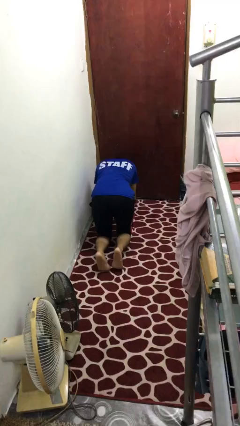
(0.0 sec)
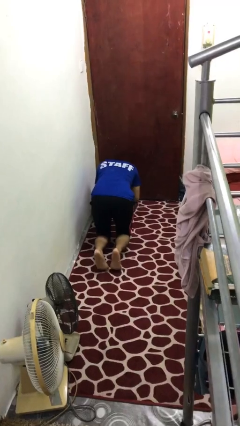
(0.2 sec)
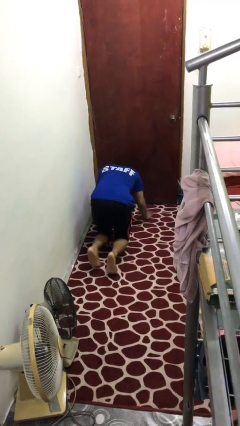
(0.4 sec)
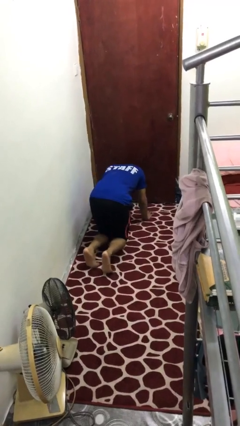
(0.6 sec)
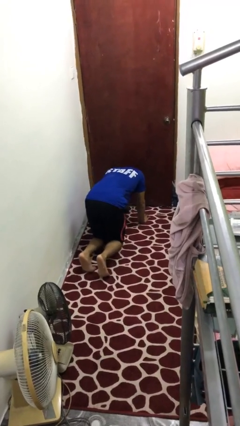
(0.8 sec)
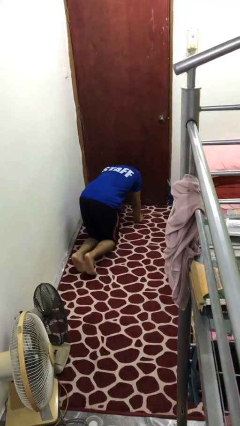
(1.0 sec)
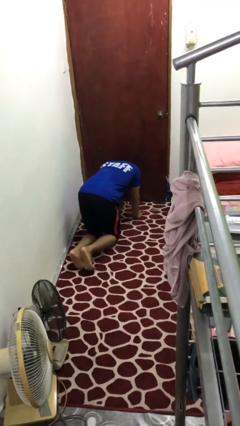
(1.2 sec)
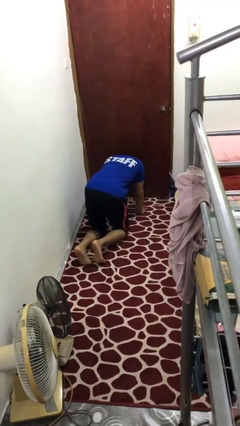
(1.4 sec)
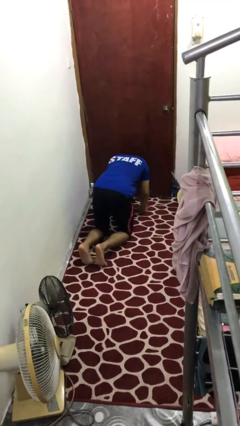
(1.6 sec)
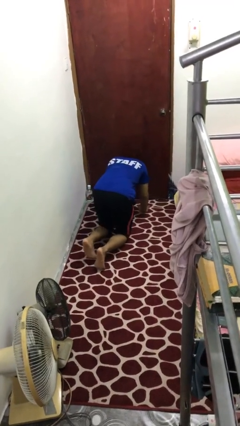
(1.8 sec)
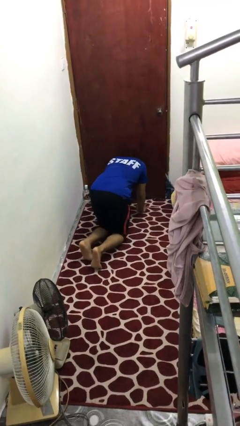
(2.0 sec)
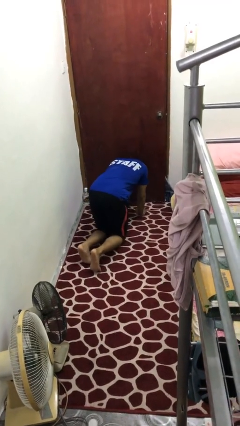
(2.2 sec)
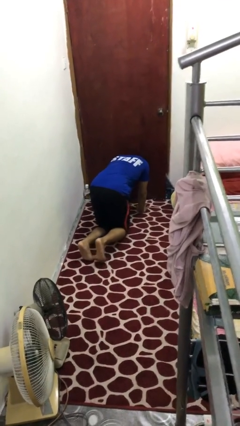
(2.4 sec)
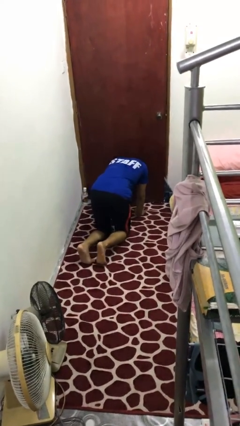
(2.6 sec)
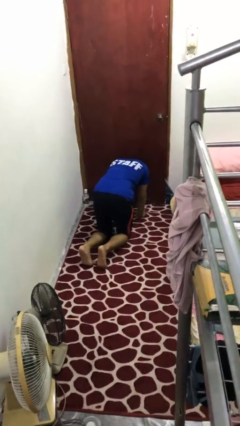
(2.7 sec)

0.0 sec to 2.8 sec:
person crawls

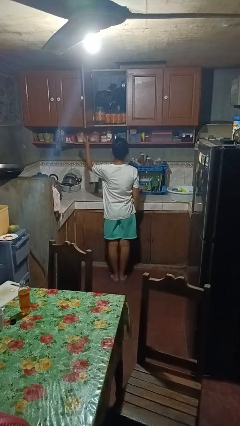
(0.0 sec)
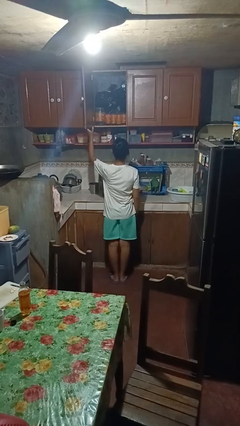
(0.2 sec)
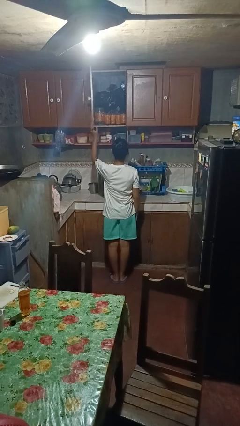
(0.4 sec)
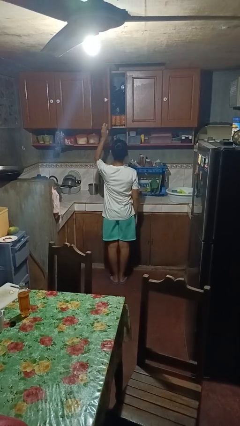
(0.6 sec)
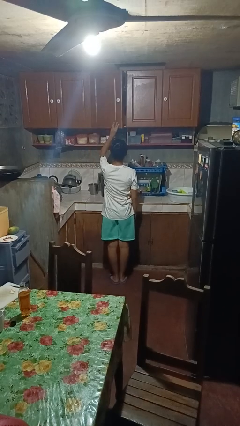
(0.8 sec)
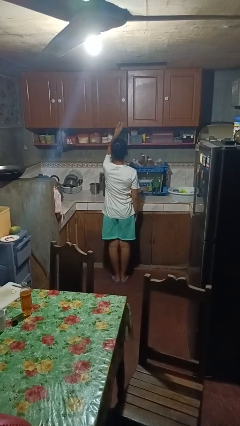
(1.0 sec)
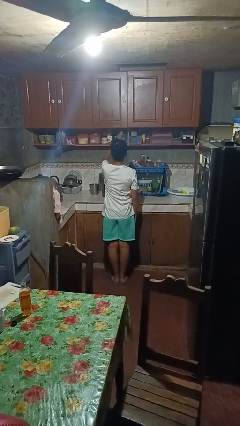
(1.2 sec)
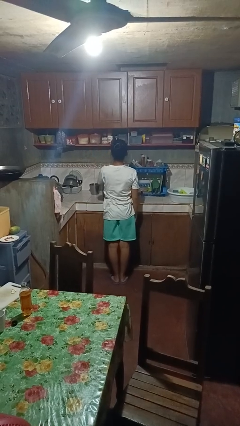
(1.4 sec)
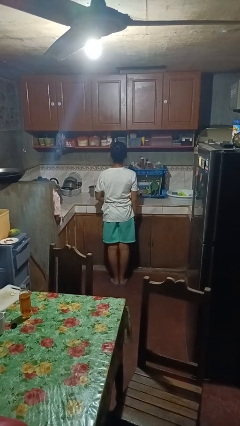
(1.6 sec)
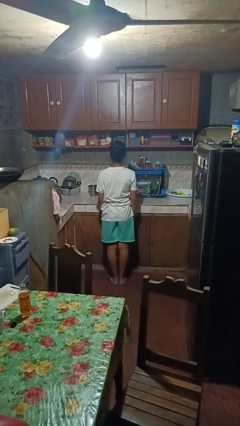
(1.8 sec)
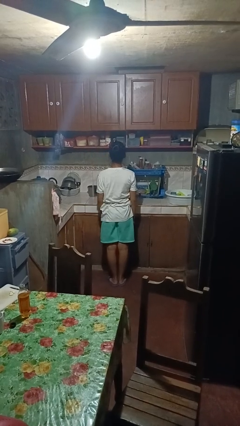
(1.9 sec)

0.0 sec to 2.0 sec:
person closes cabinet

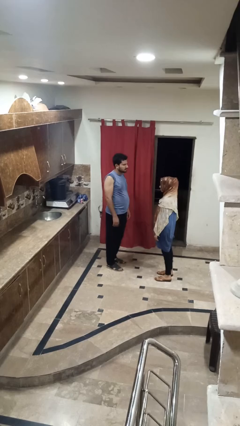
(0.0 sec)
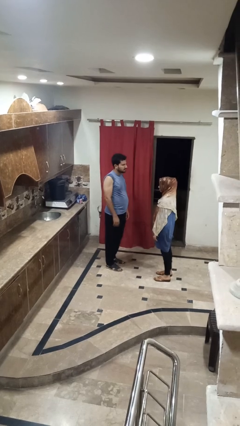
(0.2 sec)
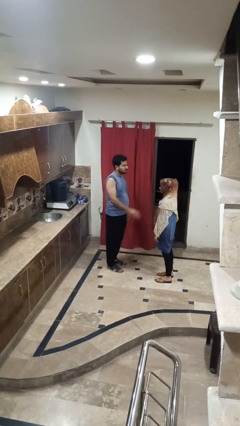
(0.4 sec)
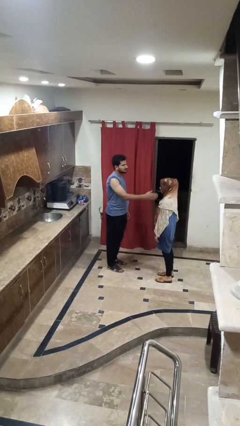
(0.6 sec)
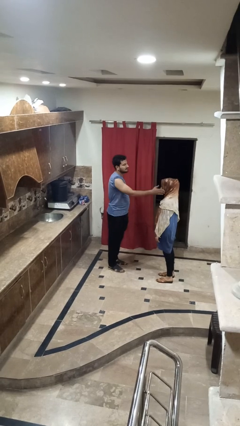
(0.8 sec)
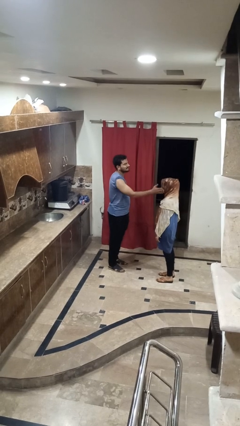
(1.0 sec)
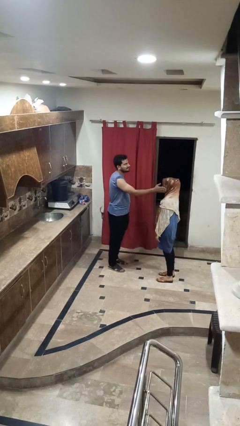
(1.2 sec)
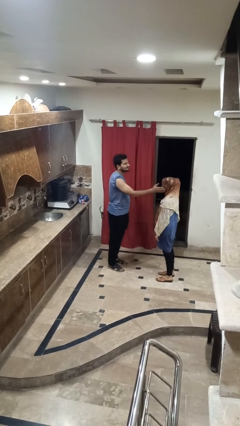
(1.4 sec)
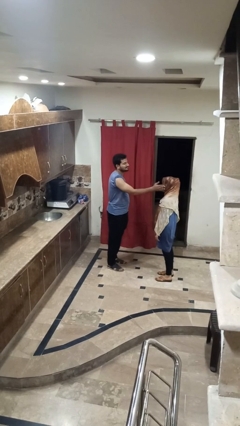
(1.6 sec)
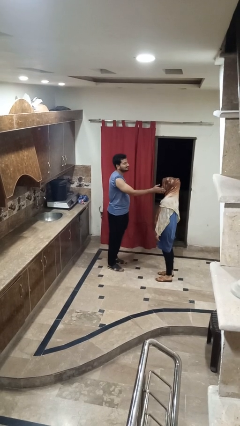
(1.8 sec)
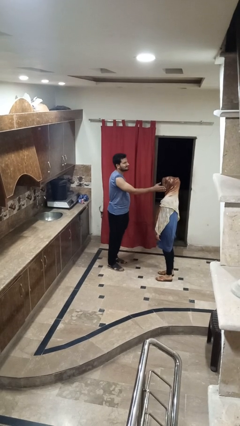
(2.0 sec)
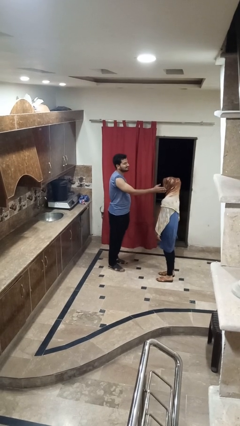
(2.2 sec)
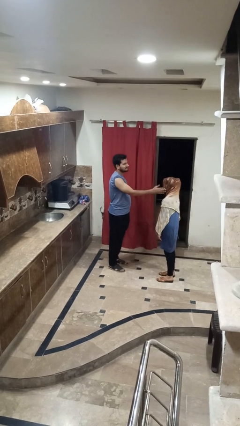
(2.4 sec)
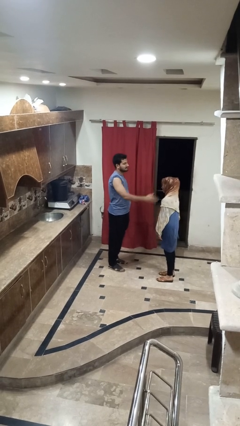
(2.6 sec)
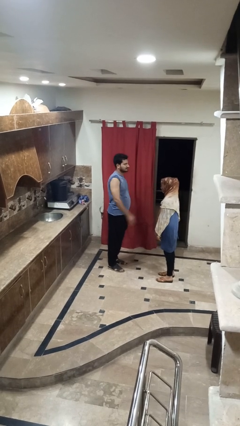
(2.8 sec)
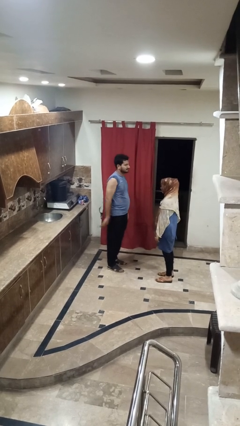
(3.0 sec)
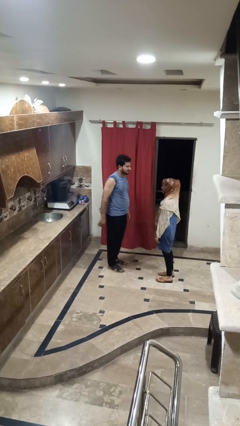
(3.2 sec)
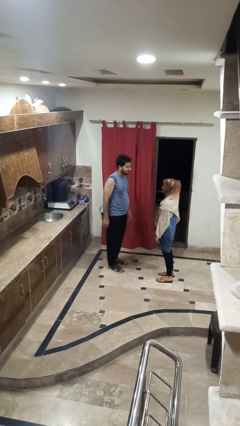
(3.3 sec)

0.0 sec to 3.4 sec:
person touches face of person

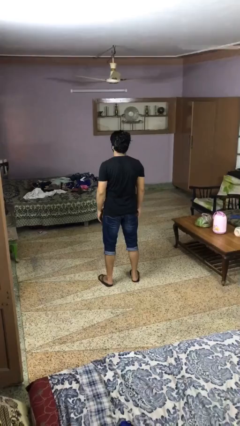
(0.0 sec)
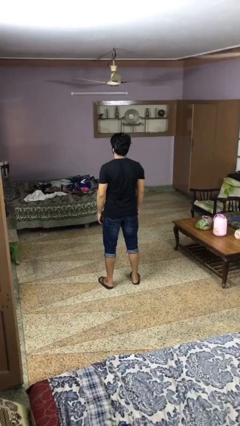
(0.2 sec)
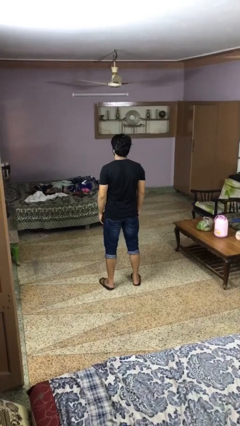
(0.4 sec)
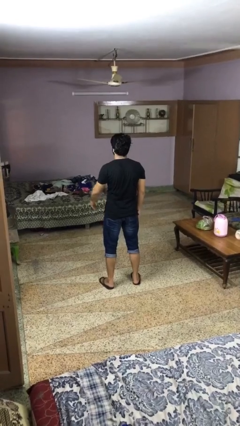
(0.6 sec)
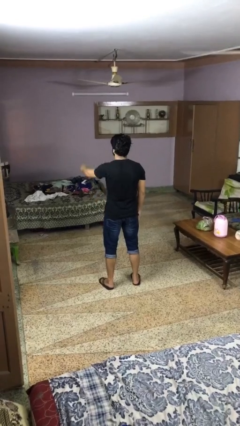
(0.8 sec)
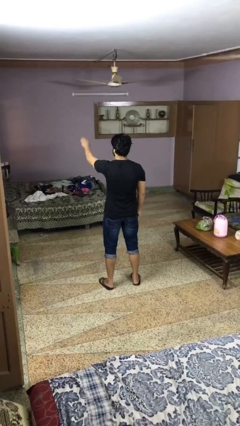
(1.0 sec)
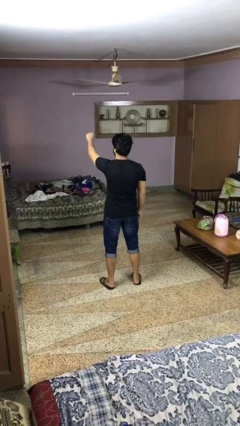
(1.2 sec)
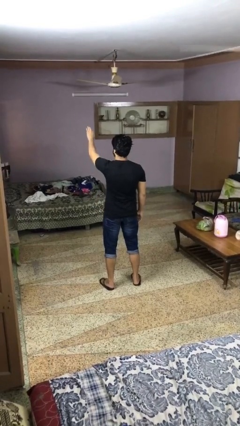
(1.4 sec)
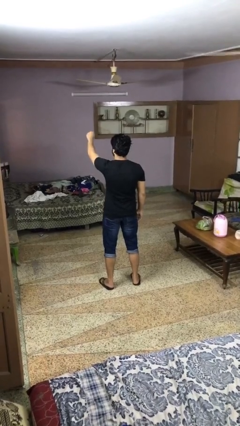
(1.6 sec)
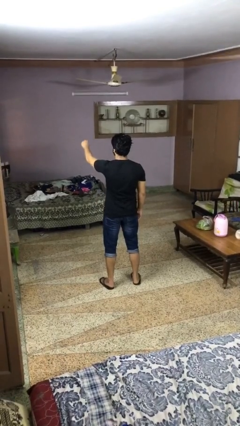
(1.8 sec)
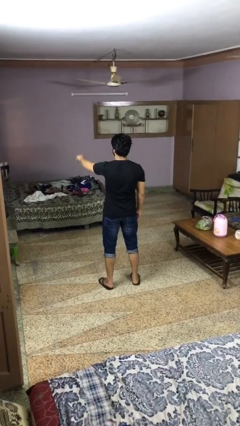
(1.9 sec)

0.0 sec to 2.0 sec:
person gestures come here

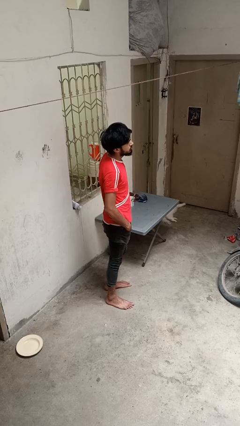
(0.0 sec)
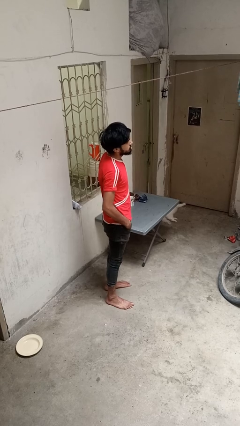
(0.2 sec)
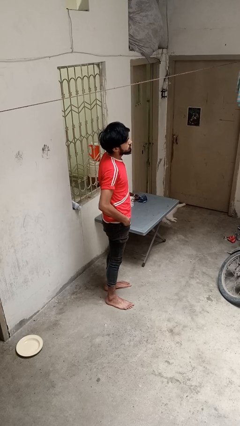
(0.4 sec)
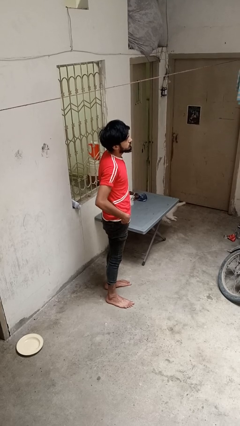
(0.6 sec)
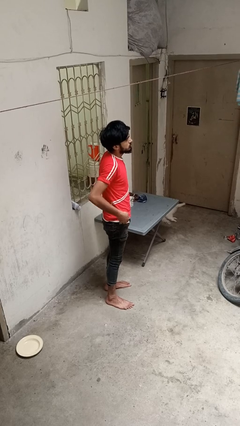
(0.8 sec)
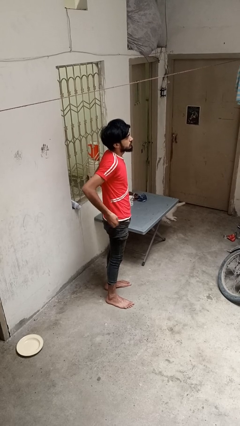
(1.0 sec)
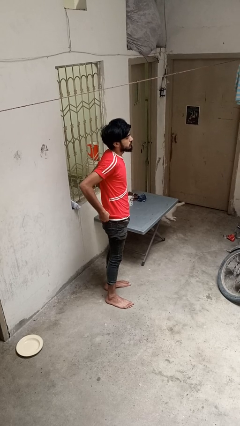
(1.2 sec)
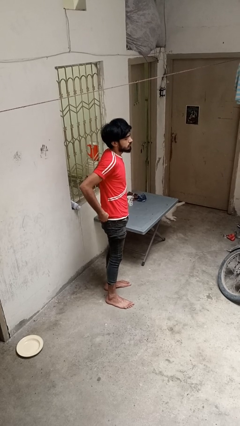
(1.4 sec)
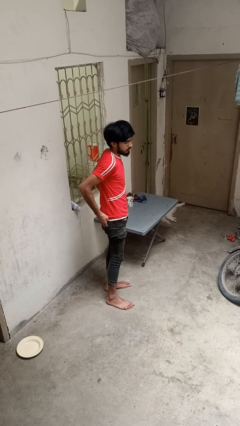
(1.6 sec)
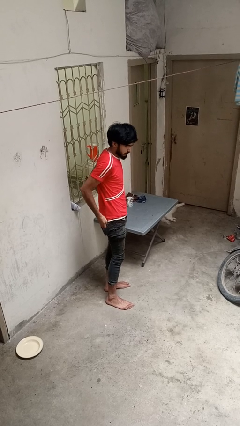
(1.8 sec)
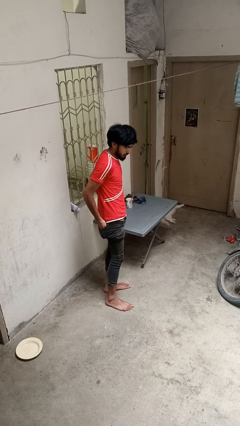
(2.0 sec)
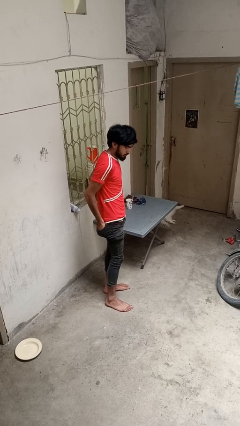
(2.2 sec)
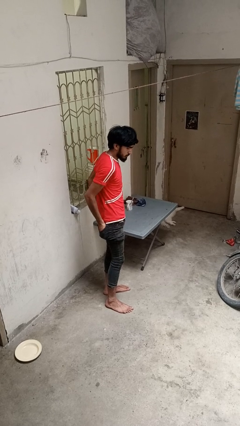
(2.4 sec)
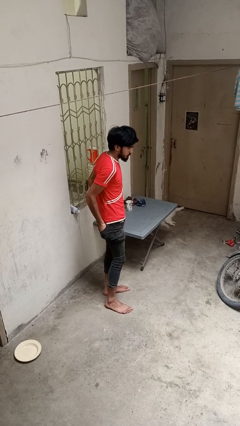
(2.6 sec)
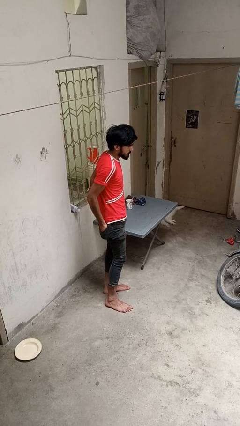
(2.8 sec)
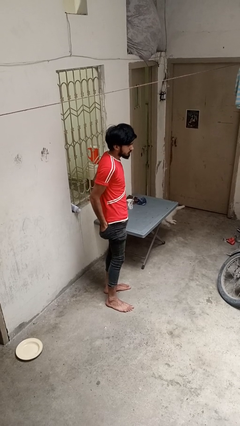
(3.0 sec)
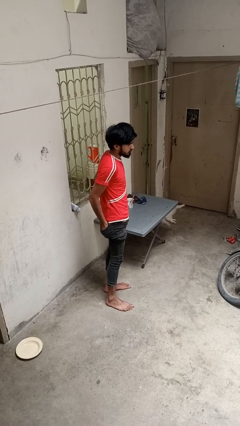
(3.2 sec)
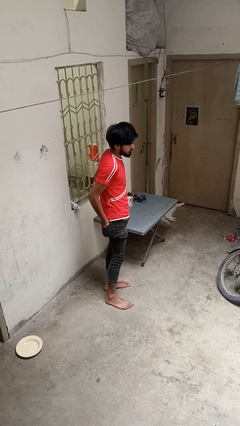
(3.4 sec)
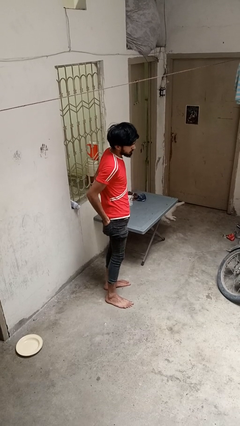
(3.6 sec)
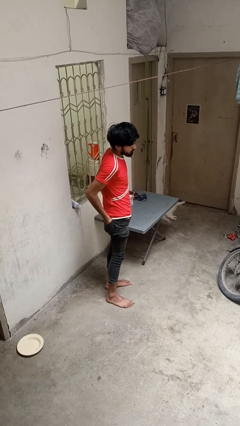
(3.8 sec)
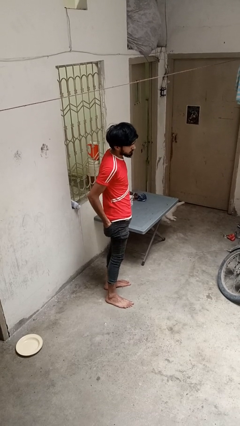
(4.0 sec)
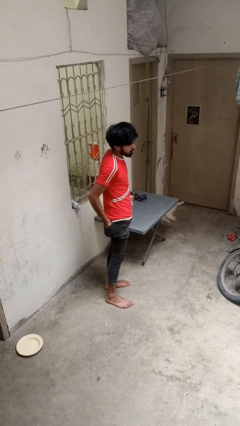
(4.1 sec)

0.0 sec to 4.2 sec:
person puts hands in back pockets

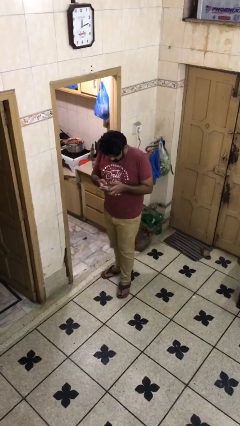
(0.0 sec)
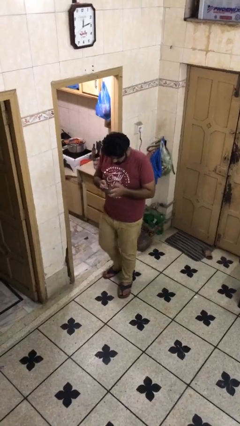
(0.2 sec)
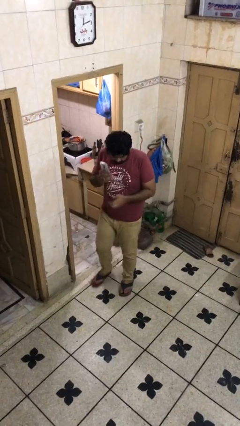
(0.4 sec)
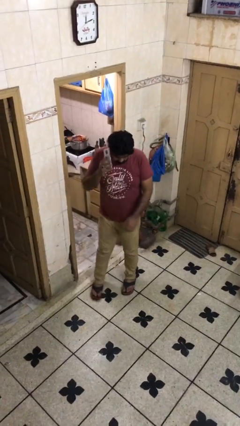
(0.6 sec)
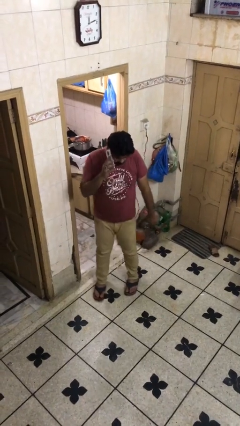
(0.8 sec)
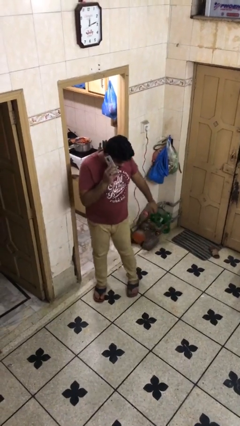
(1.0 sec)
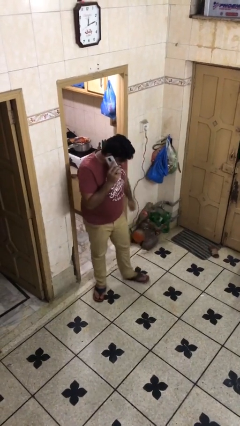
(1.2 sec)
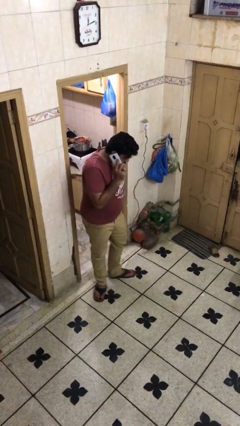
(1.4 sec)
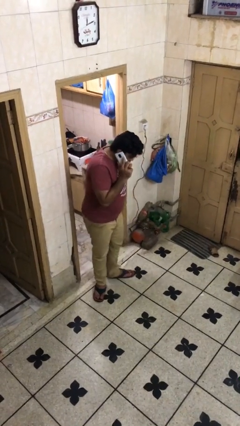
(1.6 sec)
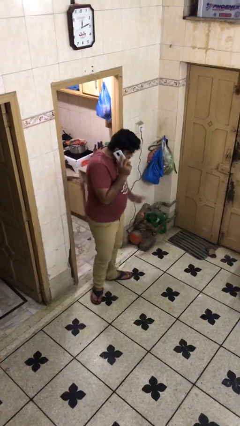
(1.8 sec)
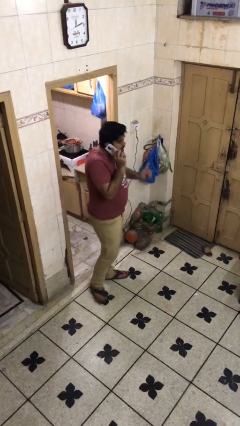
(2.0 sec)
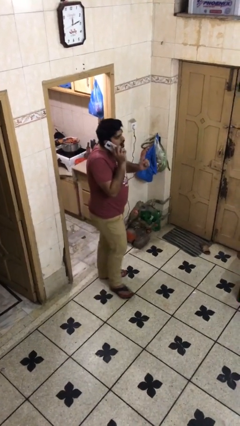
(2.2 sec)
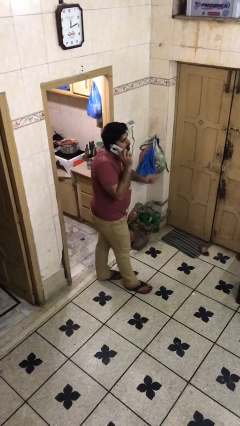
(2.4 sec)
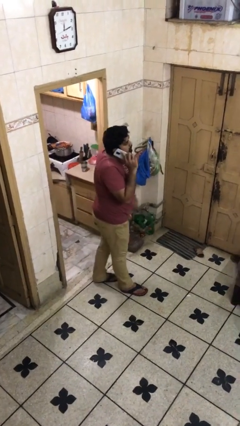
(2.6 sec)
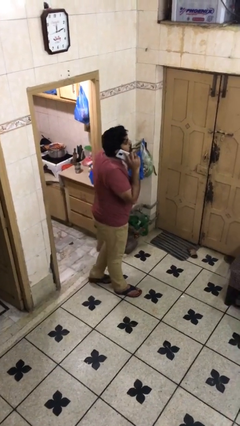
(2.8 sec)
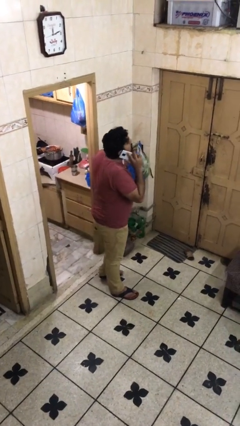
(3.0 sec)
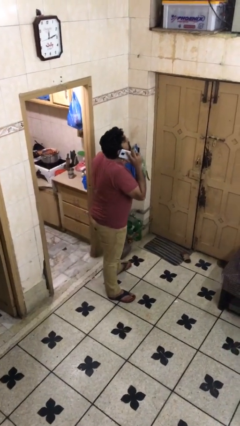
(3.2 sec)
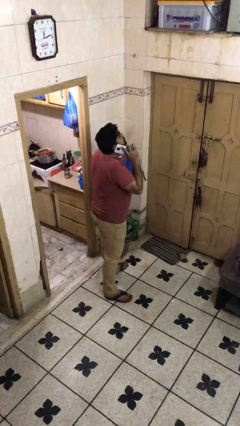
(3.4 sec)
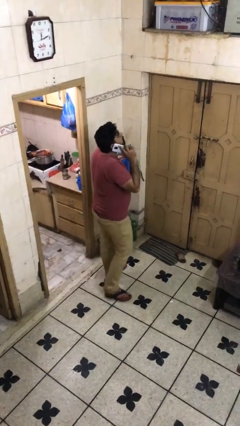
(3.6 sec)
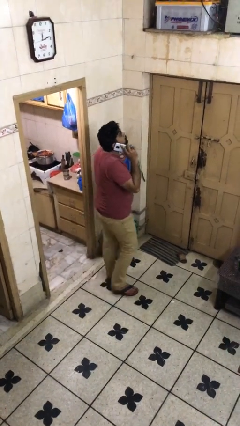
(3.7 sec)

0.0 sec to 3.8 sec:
person talks on phone
